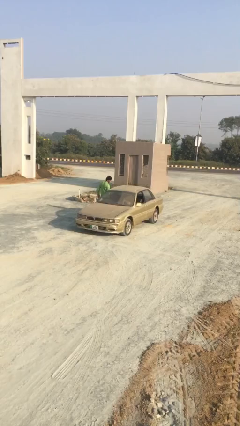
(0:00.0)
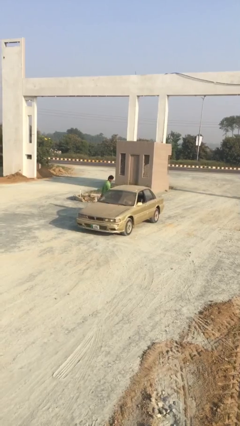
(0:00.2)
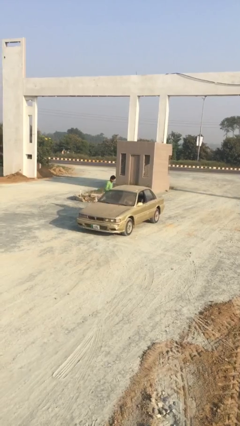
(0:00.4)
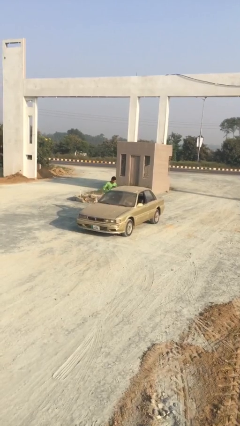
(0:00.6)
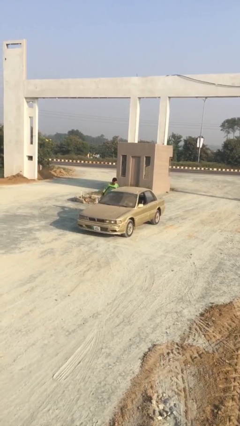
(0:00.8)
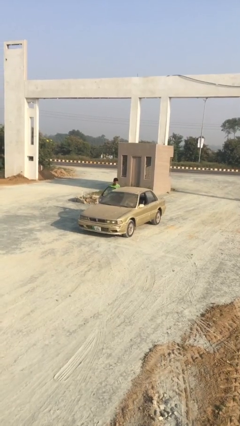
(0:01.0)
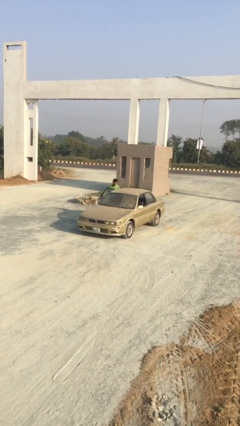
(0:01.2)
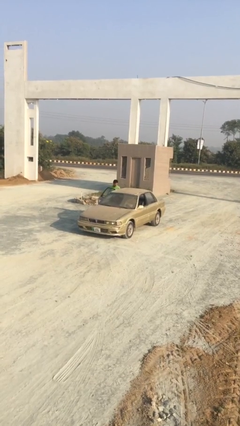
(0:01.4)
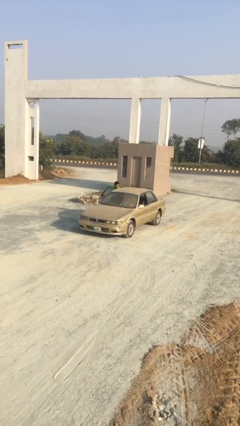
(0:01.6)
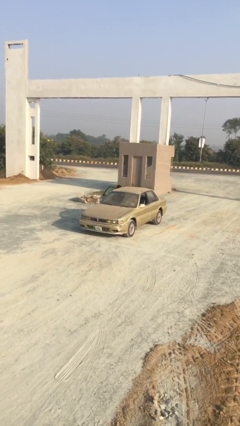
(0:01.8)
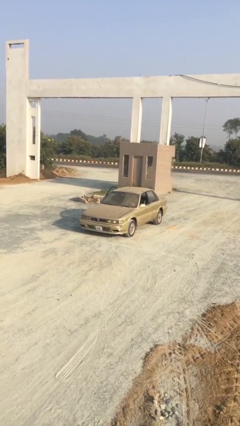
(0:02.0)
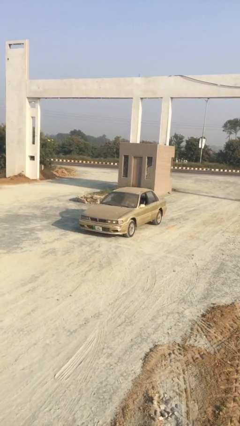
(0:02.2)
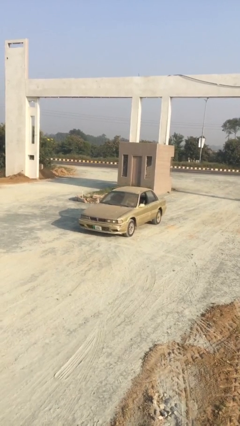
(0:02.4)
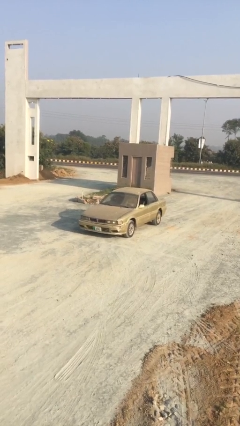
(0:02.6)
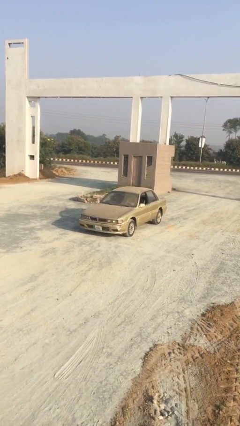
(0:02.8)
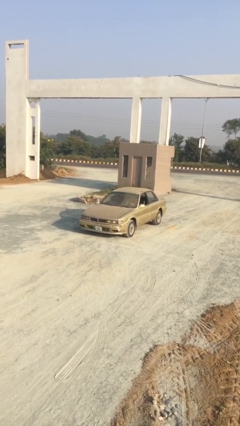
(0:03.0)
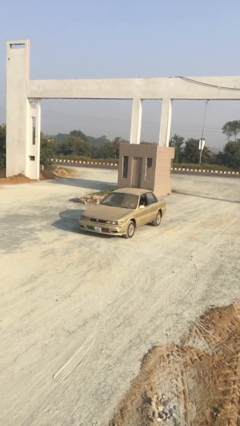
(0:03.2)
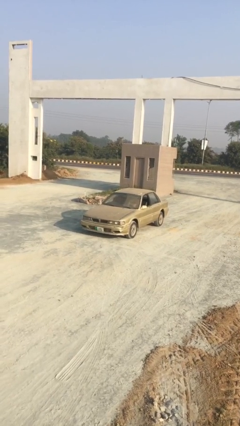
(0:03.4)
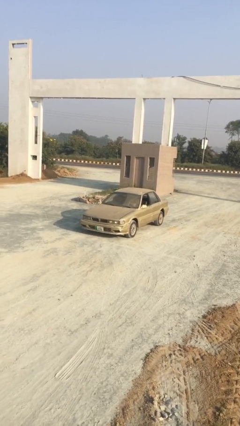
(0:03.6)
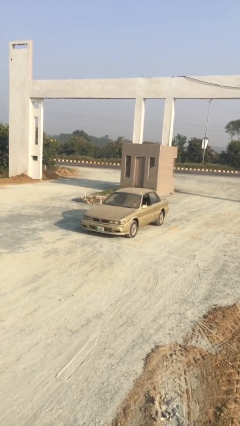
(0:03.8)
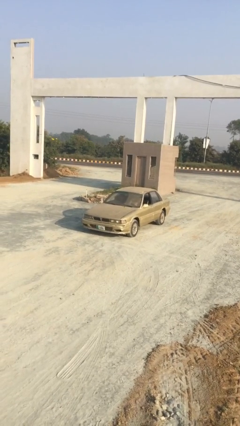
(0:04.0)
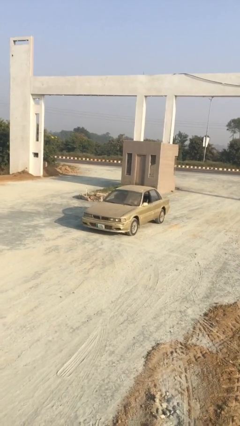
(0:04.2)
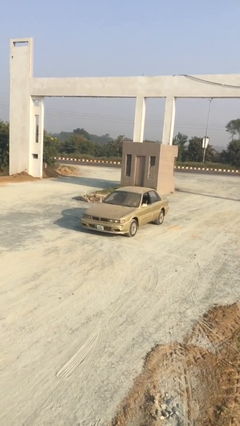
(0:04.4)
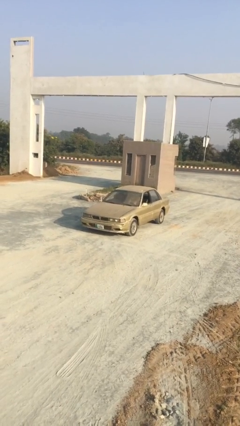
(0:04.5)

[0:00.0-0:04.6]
car picks up person

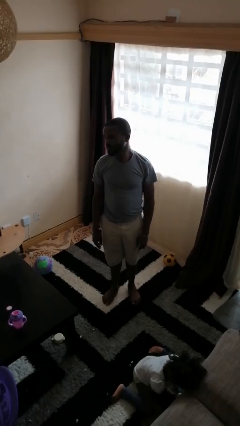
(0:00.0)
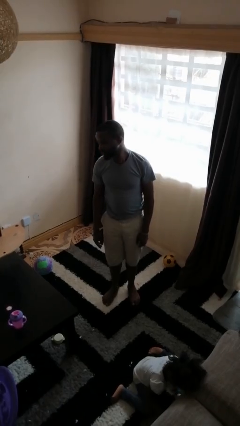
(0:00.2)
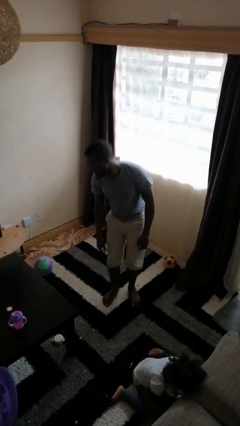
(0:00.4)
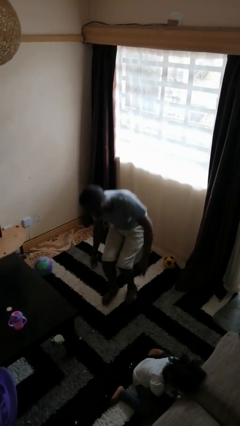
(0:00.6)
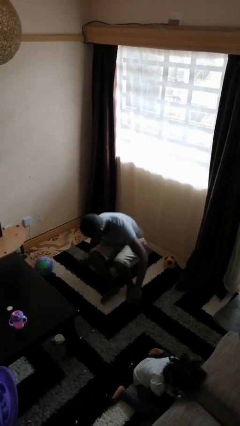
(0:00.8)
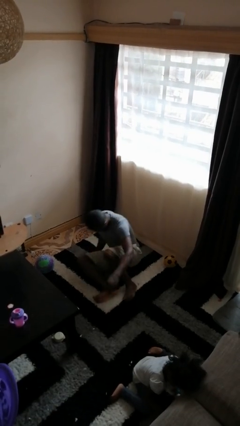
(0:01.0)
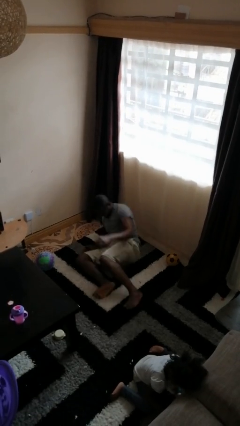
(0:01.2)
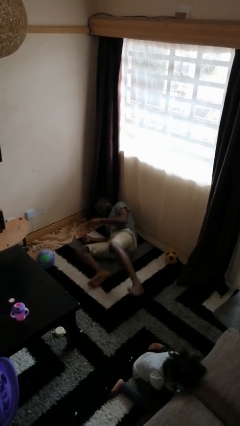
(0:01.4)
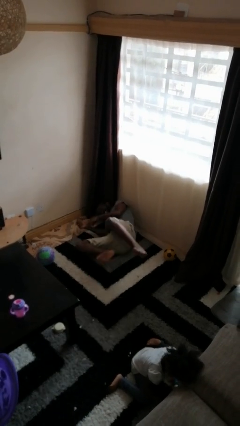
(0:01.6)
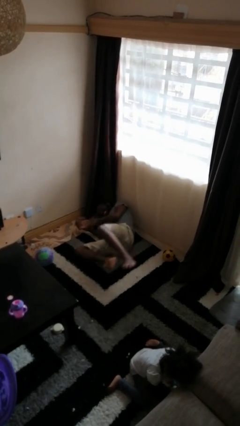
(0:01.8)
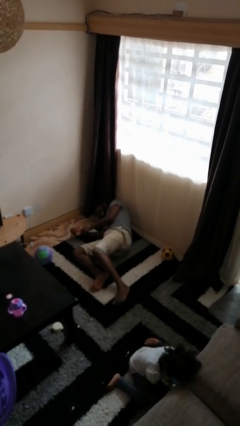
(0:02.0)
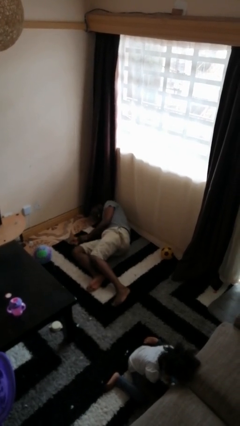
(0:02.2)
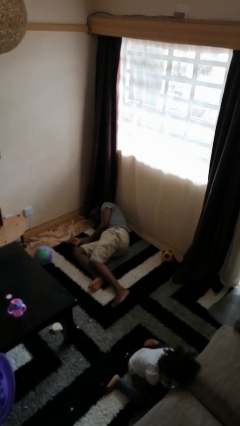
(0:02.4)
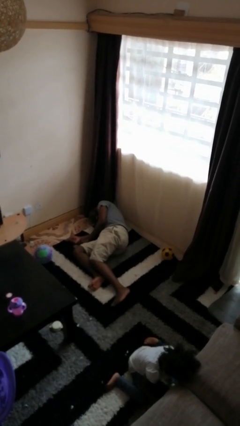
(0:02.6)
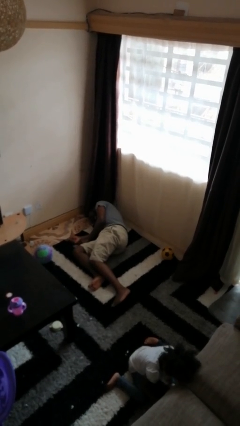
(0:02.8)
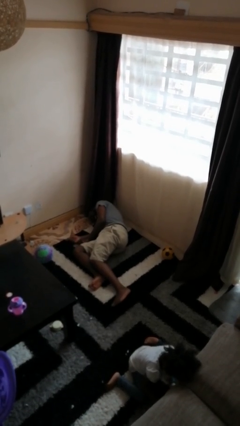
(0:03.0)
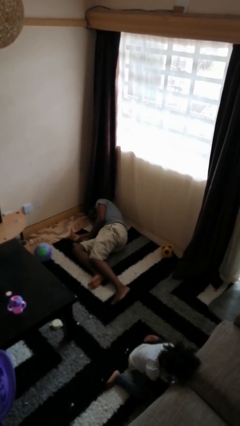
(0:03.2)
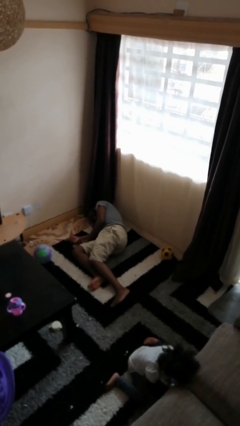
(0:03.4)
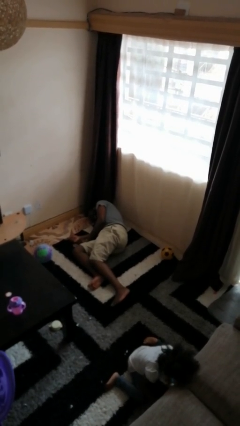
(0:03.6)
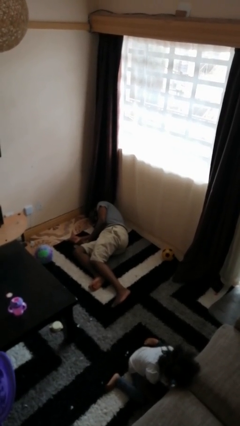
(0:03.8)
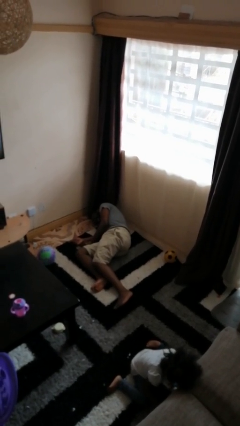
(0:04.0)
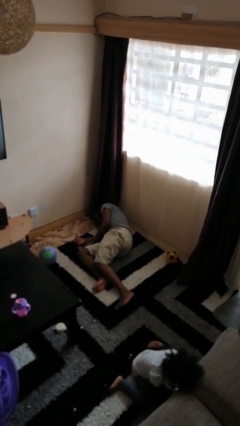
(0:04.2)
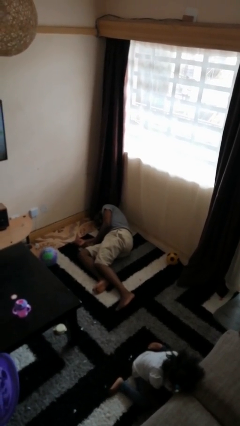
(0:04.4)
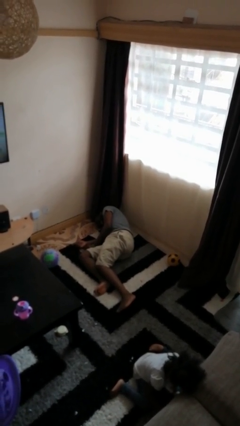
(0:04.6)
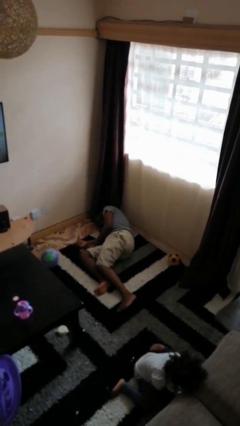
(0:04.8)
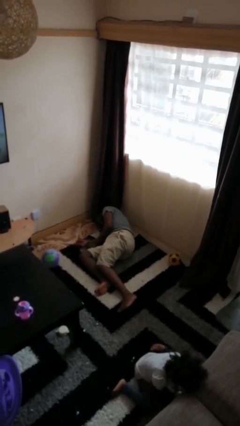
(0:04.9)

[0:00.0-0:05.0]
person falls while standing

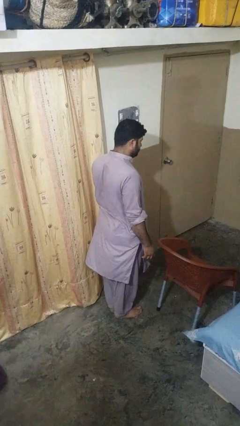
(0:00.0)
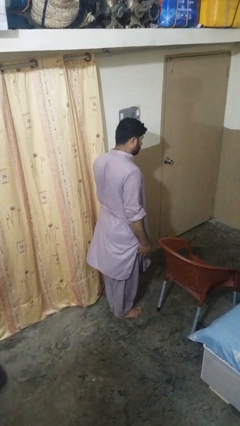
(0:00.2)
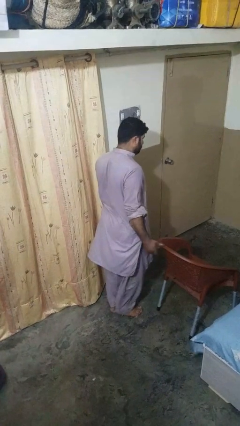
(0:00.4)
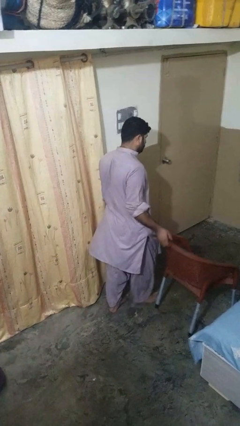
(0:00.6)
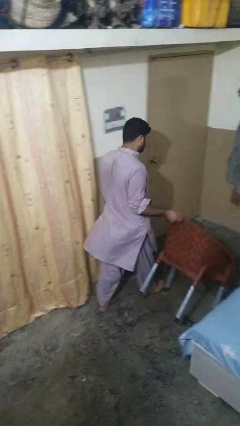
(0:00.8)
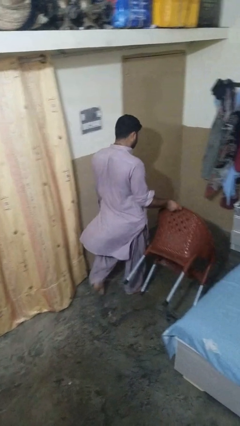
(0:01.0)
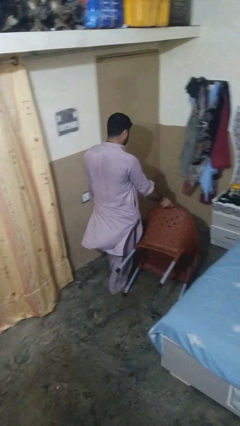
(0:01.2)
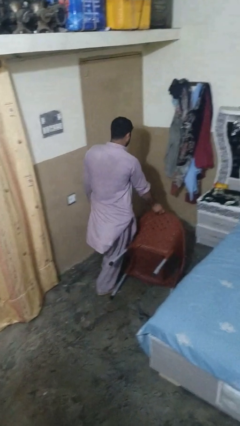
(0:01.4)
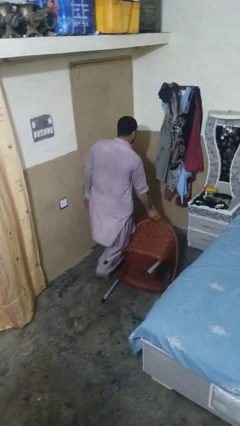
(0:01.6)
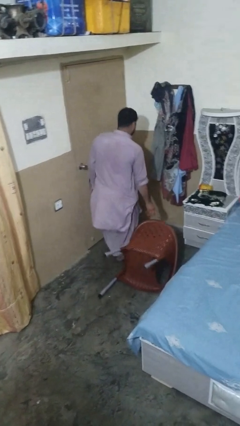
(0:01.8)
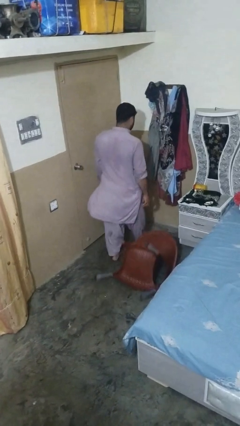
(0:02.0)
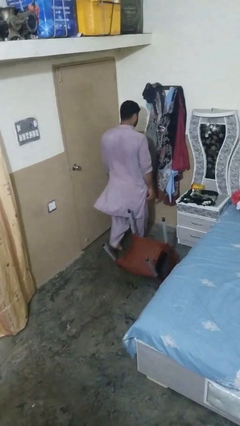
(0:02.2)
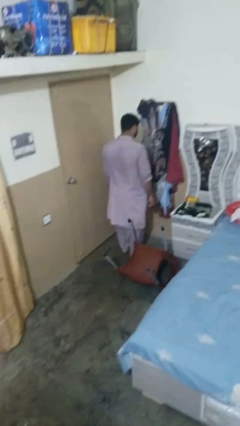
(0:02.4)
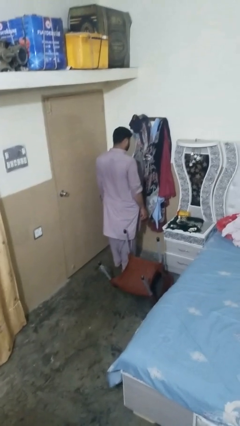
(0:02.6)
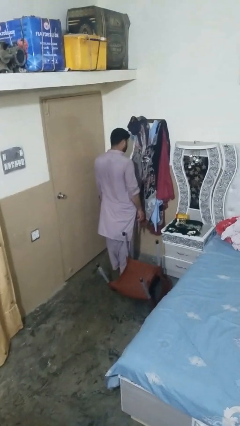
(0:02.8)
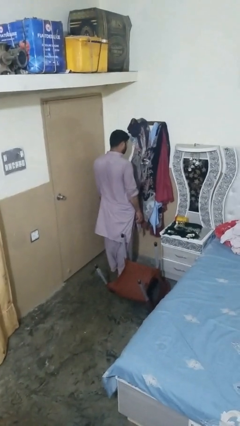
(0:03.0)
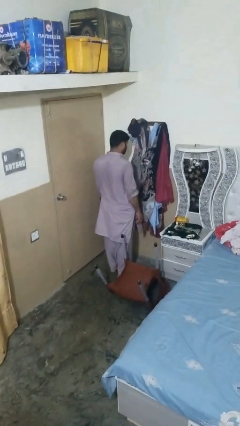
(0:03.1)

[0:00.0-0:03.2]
person knocks over furniture

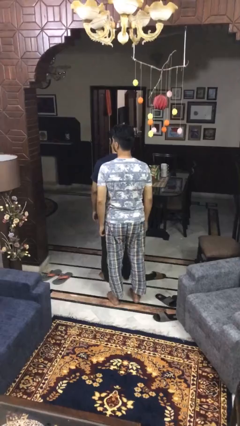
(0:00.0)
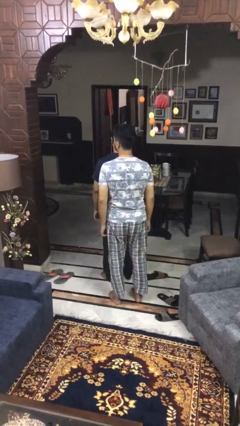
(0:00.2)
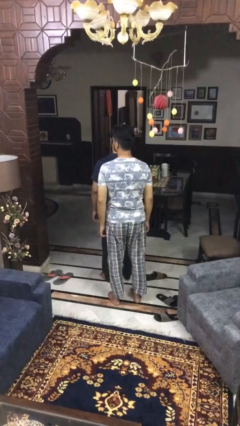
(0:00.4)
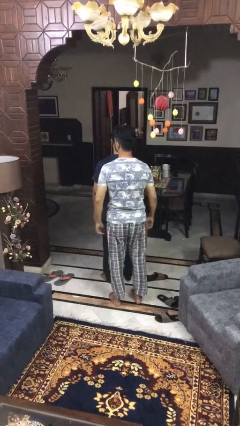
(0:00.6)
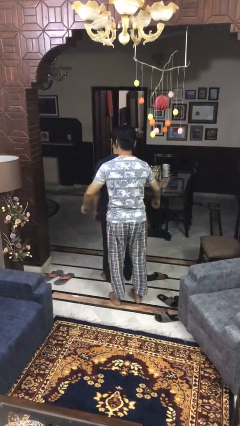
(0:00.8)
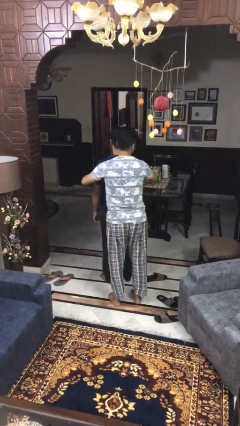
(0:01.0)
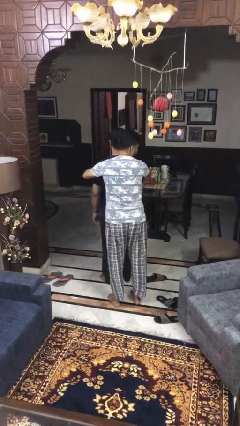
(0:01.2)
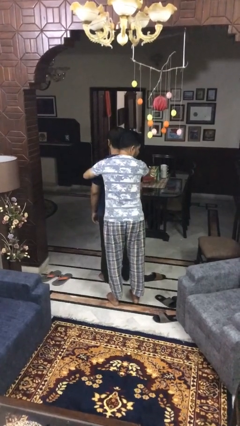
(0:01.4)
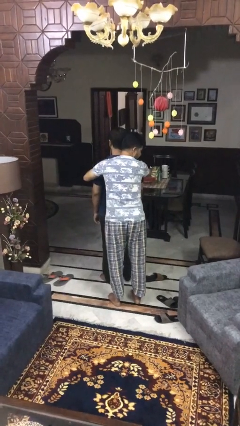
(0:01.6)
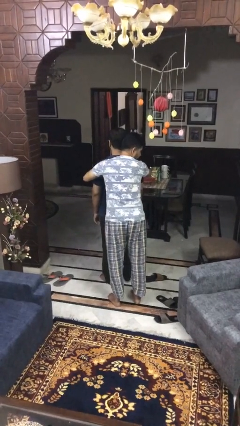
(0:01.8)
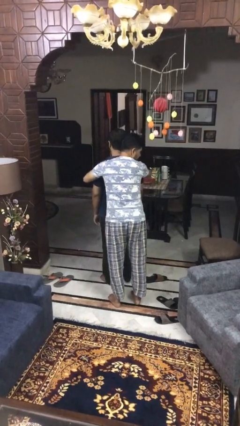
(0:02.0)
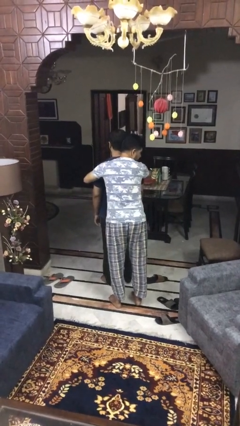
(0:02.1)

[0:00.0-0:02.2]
person hugs person from behind

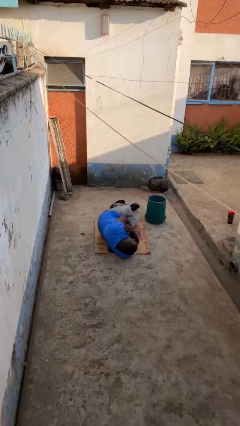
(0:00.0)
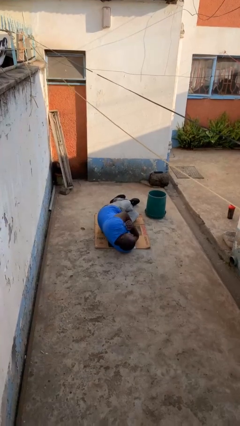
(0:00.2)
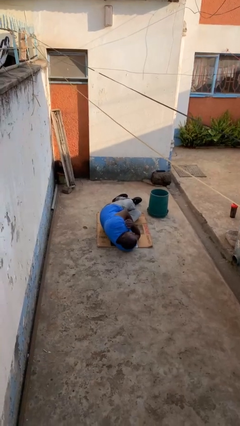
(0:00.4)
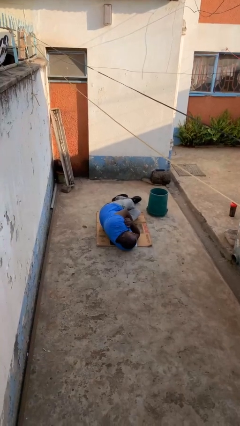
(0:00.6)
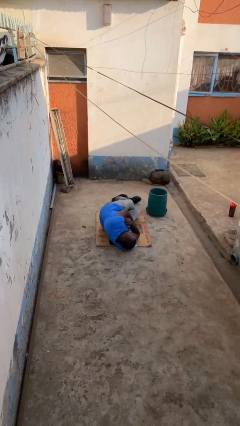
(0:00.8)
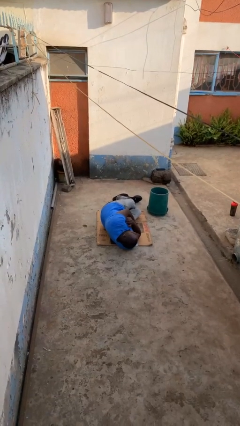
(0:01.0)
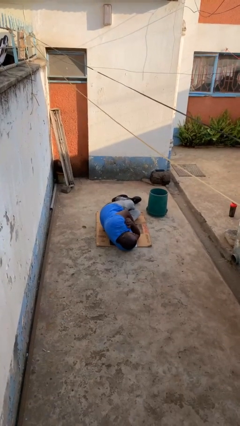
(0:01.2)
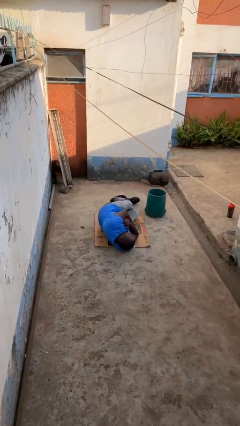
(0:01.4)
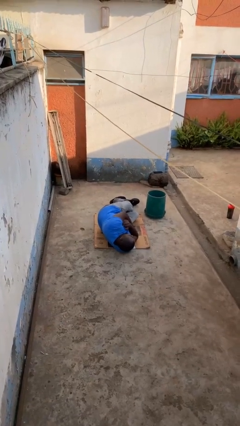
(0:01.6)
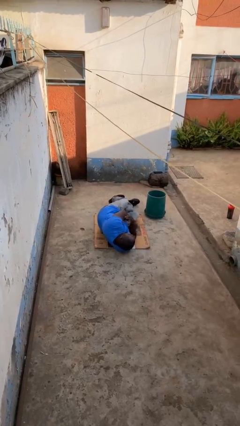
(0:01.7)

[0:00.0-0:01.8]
person lies down on floor

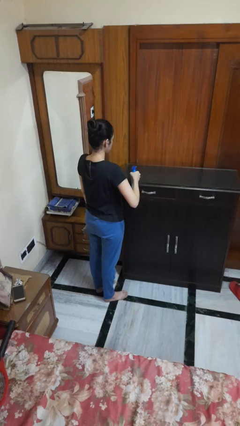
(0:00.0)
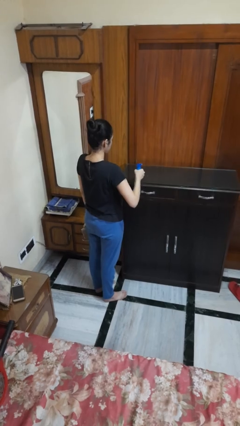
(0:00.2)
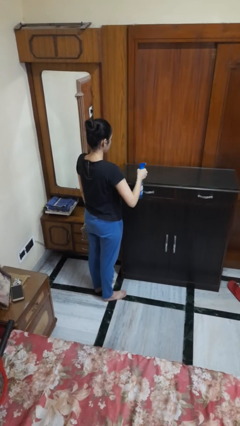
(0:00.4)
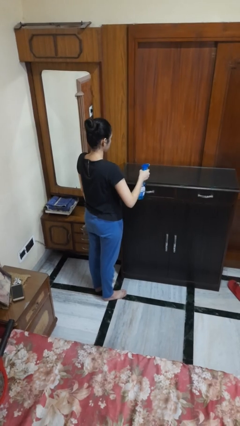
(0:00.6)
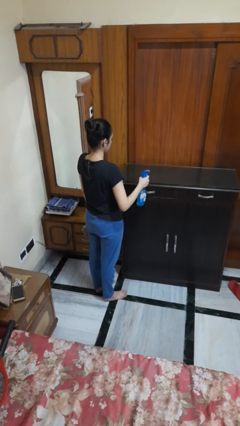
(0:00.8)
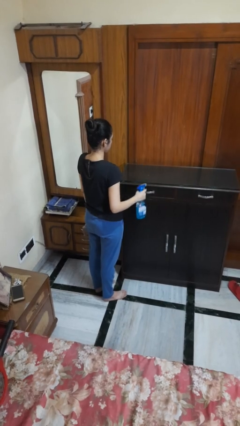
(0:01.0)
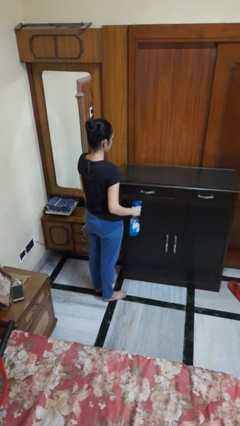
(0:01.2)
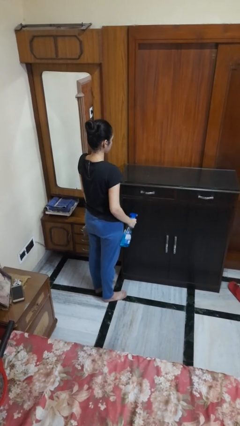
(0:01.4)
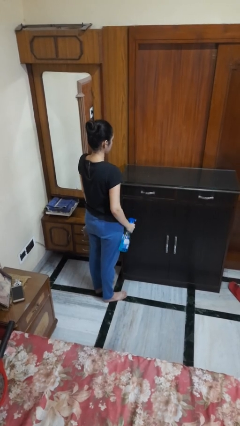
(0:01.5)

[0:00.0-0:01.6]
person sprays from bottle
